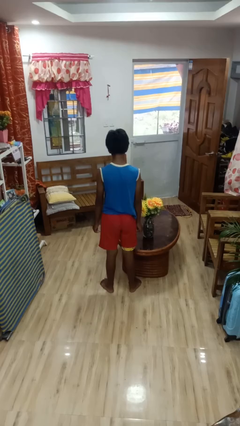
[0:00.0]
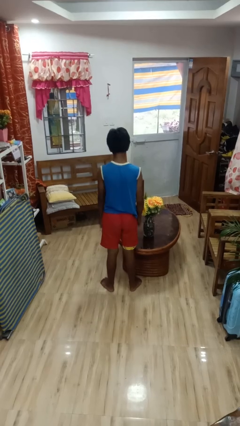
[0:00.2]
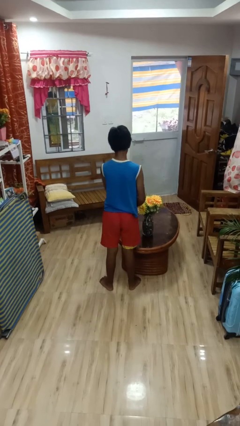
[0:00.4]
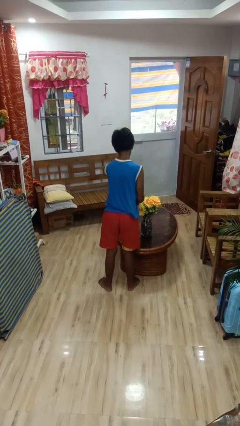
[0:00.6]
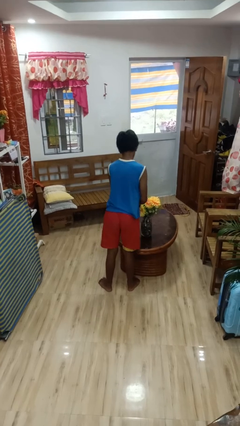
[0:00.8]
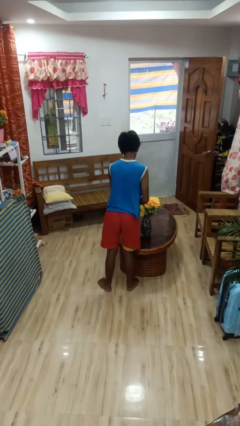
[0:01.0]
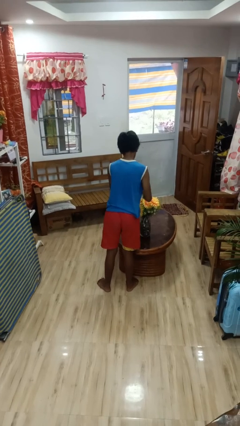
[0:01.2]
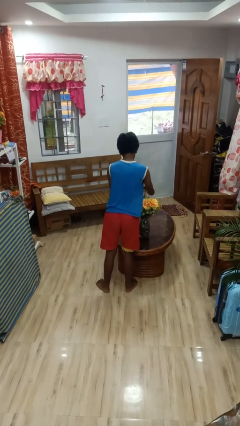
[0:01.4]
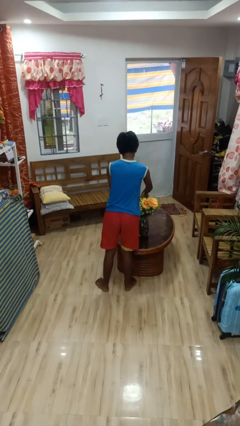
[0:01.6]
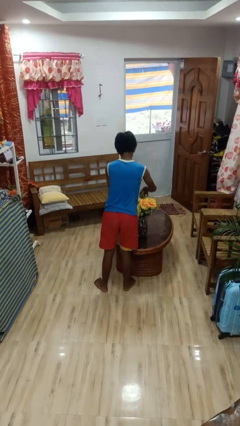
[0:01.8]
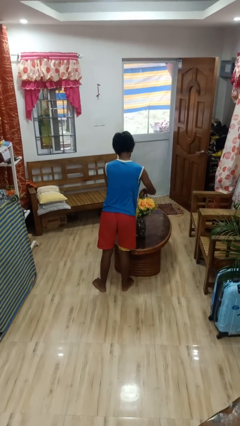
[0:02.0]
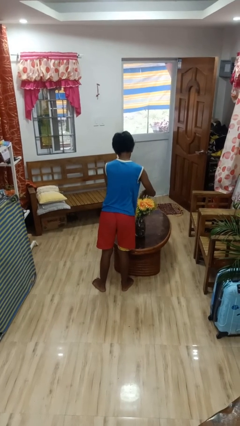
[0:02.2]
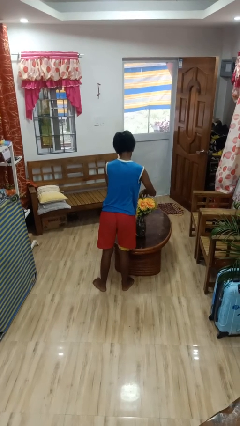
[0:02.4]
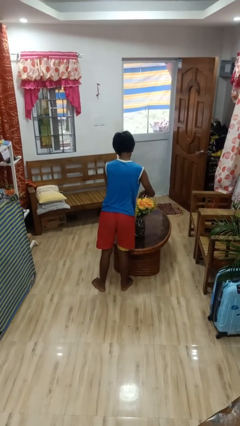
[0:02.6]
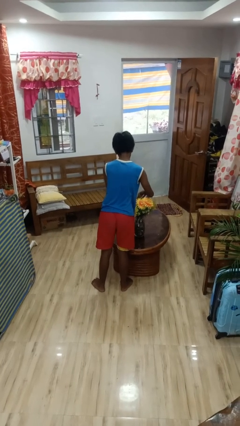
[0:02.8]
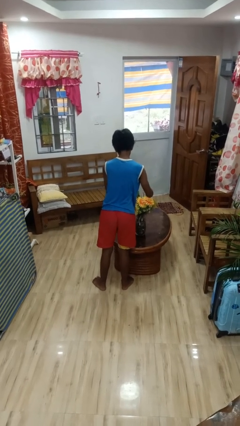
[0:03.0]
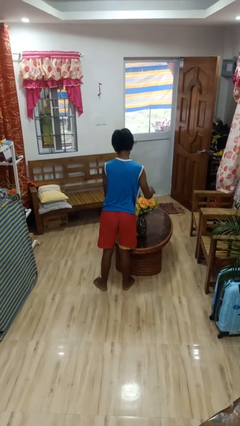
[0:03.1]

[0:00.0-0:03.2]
person arranges flowers in vase

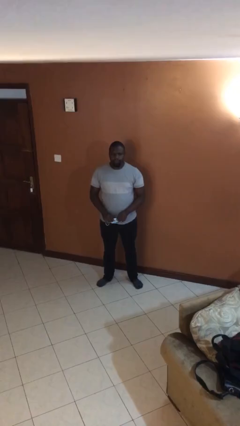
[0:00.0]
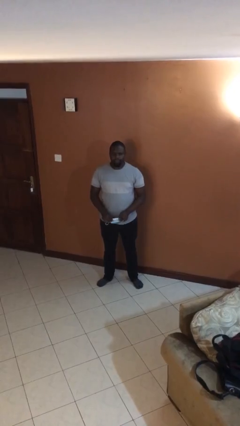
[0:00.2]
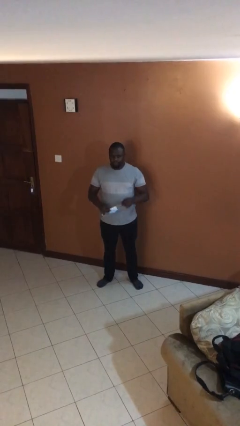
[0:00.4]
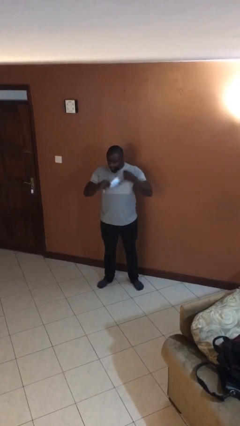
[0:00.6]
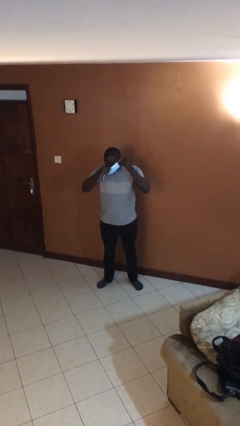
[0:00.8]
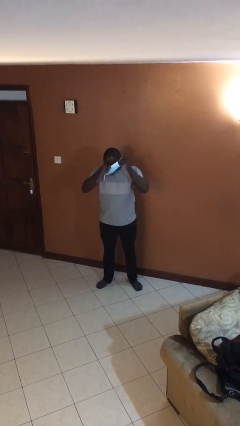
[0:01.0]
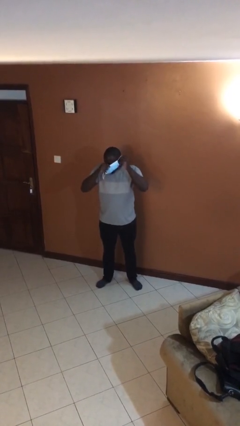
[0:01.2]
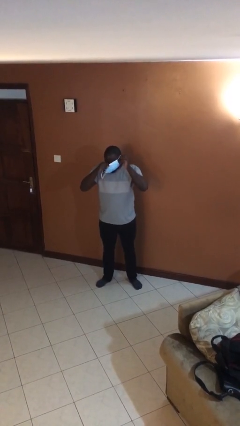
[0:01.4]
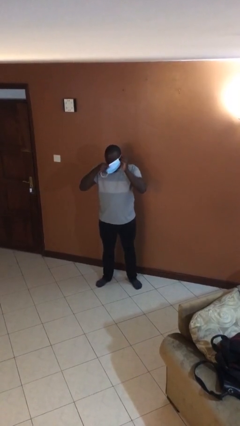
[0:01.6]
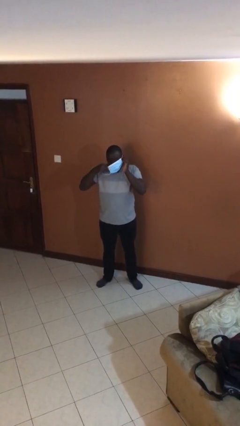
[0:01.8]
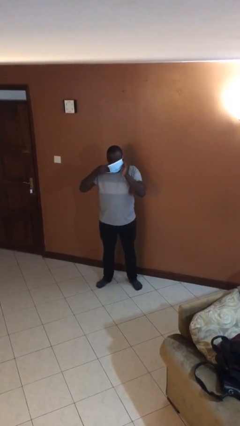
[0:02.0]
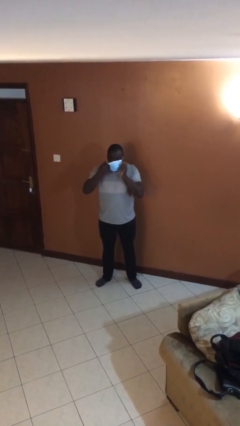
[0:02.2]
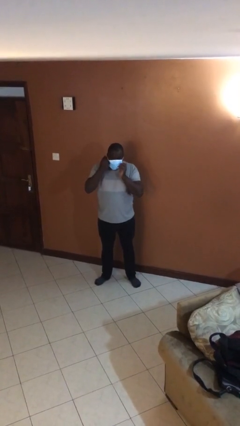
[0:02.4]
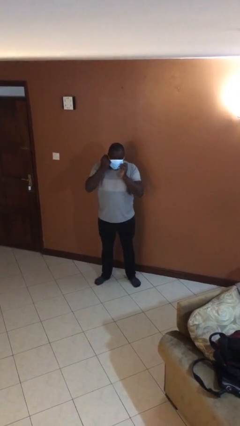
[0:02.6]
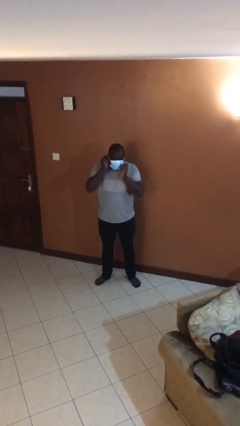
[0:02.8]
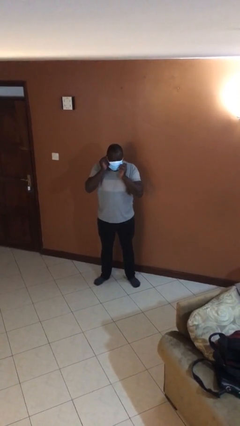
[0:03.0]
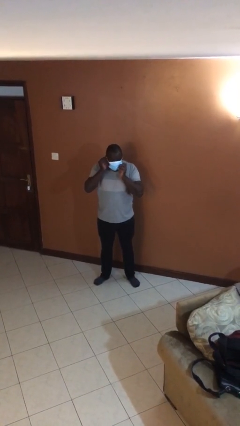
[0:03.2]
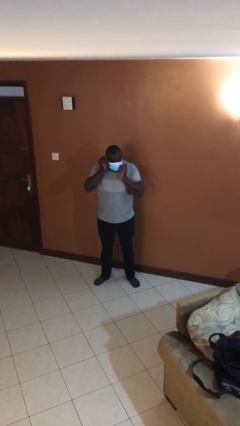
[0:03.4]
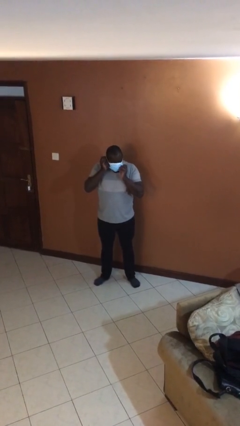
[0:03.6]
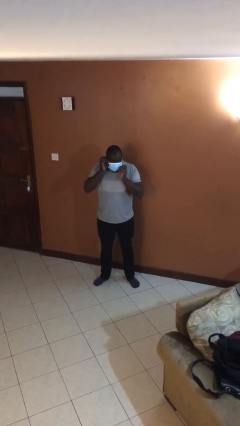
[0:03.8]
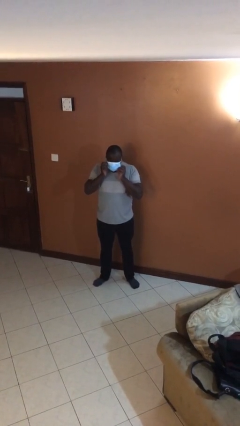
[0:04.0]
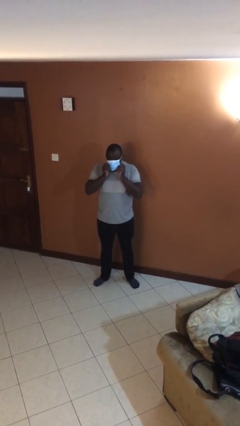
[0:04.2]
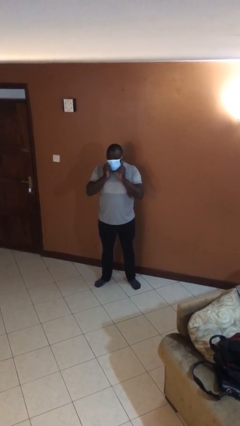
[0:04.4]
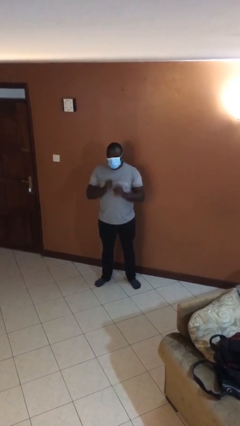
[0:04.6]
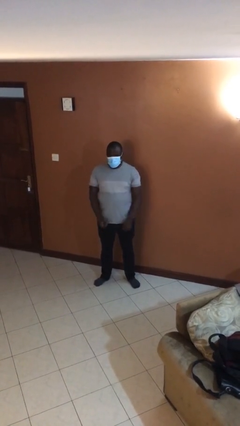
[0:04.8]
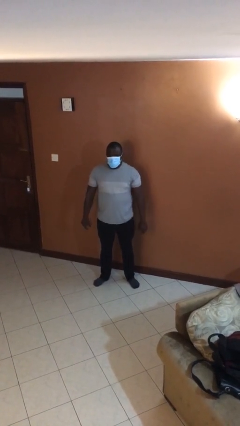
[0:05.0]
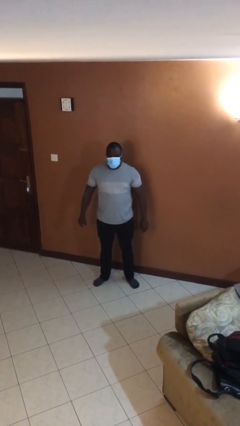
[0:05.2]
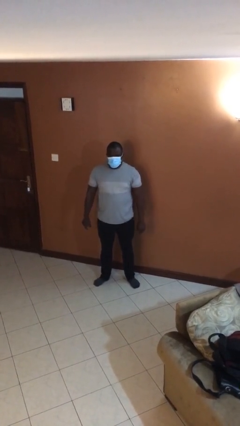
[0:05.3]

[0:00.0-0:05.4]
person puts on facemask

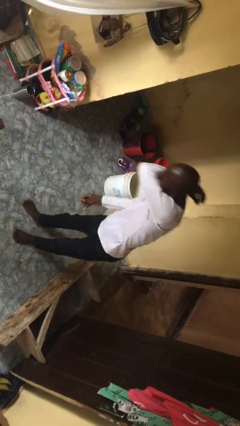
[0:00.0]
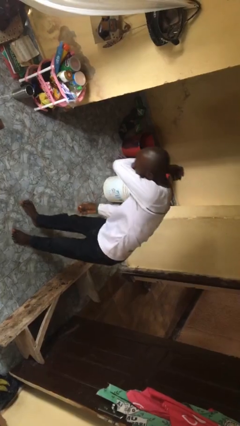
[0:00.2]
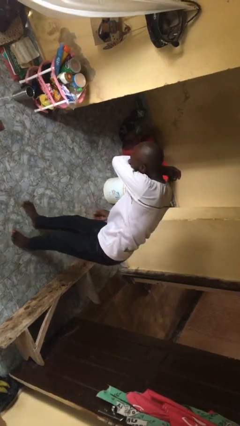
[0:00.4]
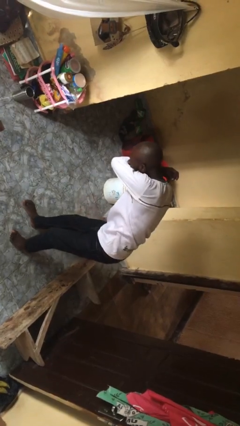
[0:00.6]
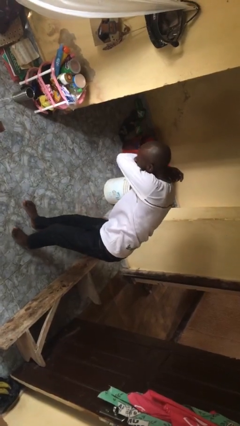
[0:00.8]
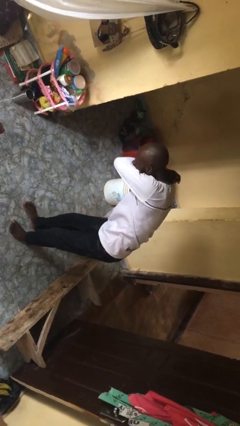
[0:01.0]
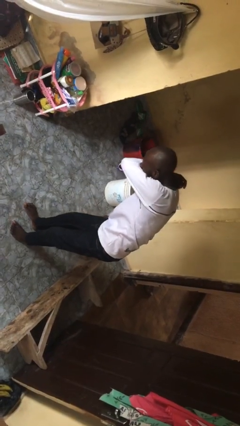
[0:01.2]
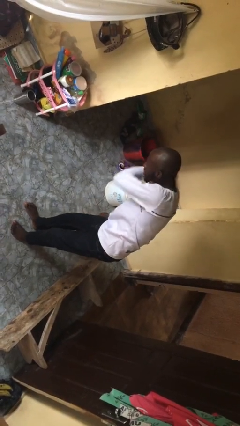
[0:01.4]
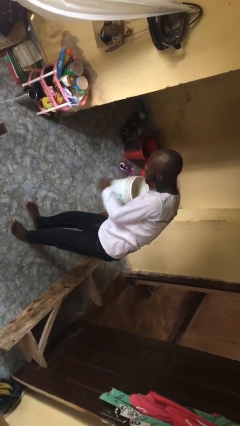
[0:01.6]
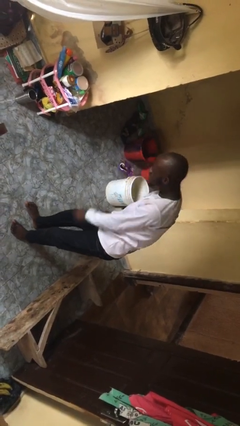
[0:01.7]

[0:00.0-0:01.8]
person sneezes into arm

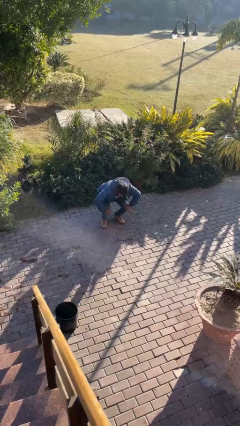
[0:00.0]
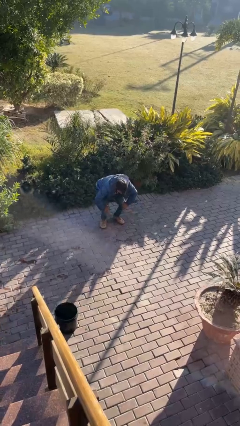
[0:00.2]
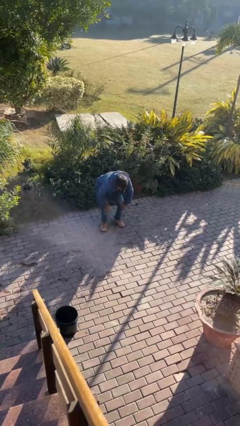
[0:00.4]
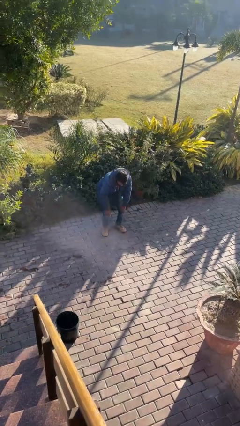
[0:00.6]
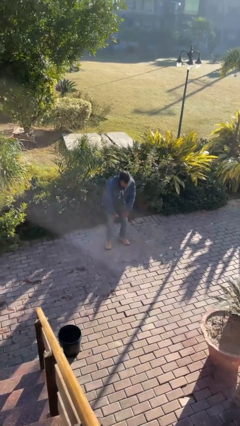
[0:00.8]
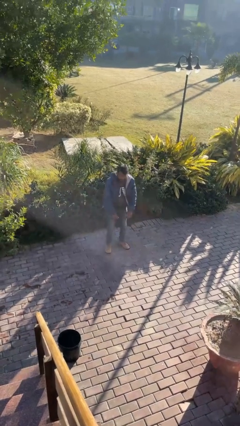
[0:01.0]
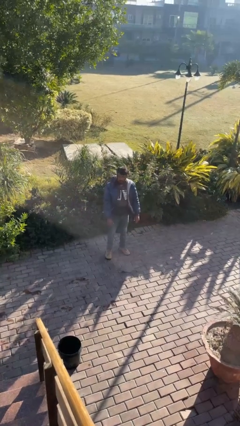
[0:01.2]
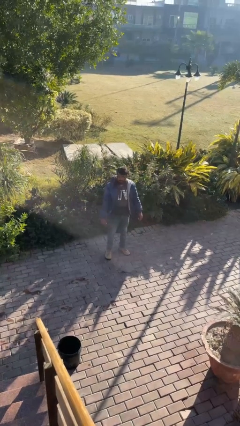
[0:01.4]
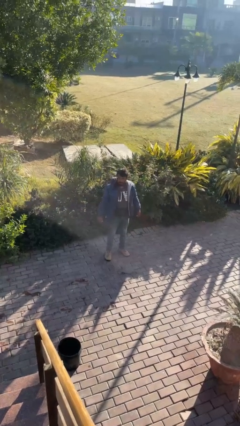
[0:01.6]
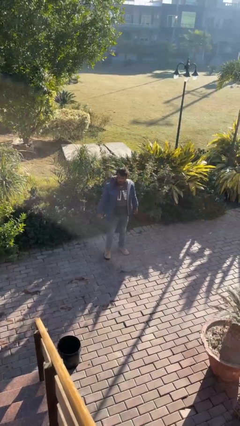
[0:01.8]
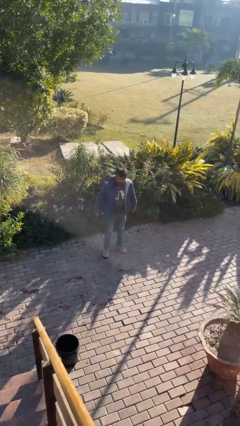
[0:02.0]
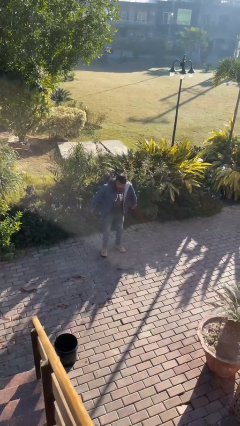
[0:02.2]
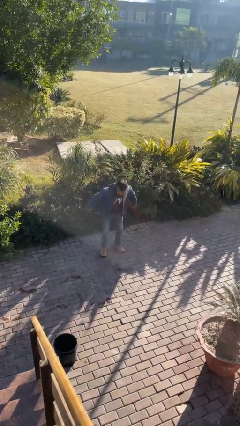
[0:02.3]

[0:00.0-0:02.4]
person stands up

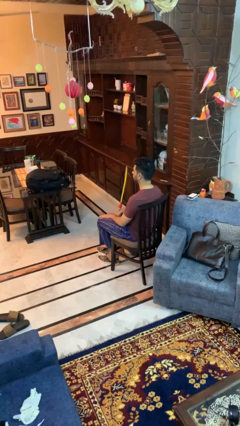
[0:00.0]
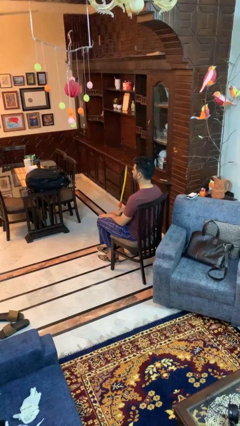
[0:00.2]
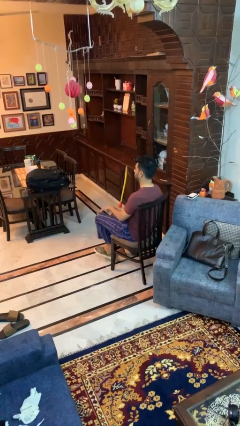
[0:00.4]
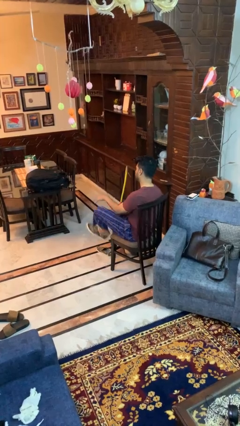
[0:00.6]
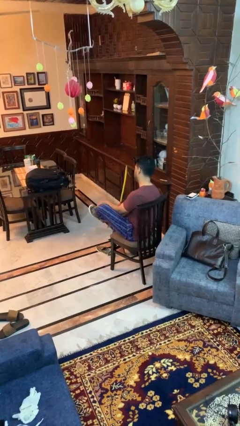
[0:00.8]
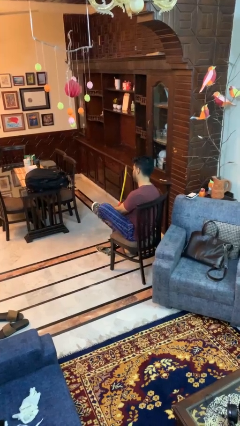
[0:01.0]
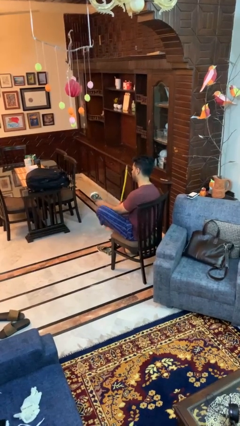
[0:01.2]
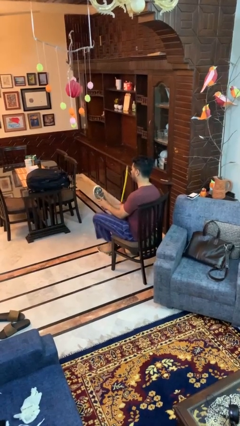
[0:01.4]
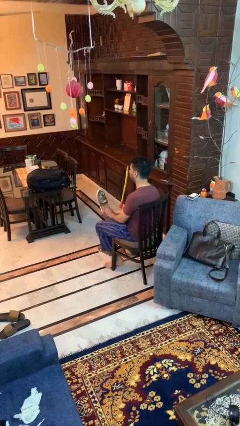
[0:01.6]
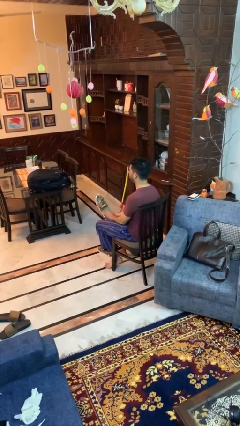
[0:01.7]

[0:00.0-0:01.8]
person takes off shoes

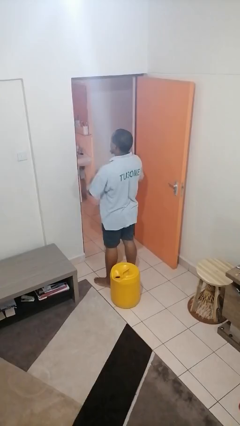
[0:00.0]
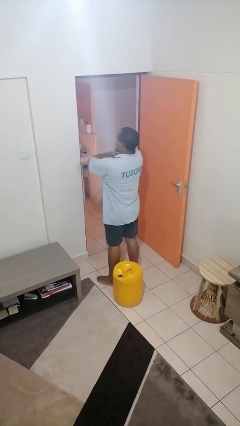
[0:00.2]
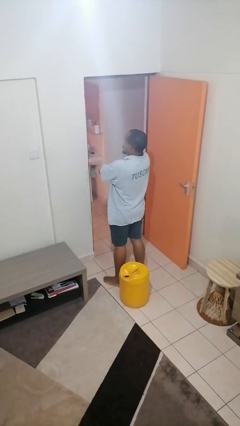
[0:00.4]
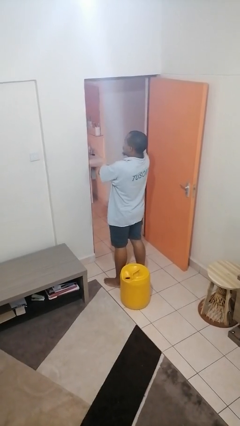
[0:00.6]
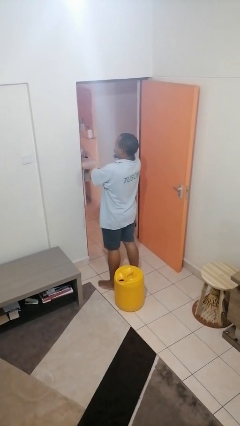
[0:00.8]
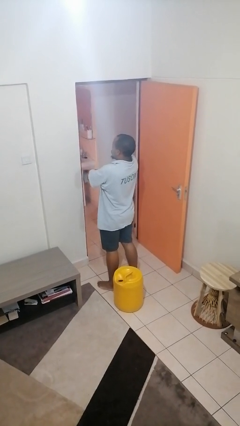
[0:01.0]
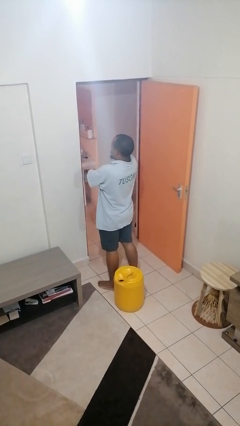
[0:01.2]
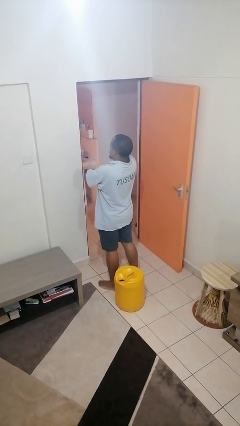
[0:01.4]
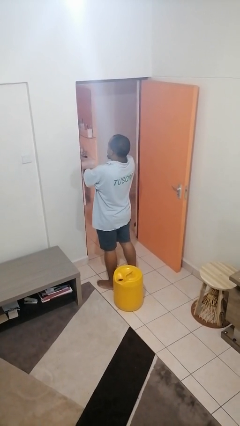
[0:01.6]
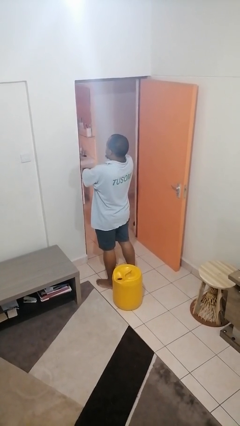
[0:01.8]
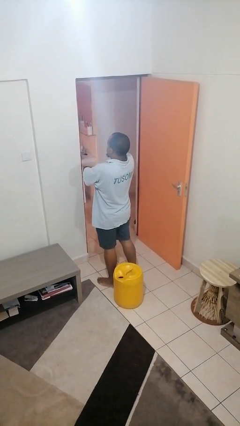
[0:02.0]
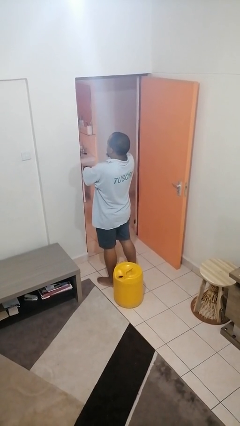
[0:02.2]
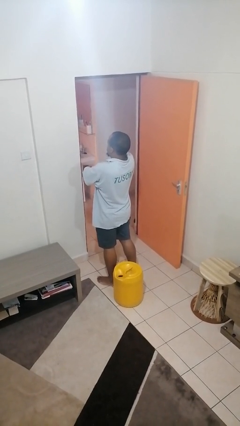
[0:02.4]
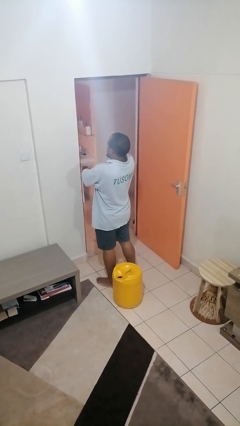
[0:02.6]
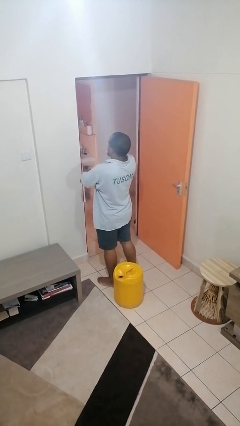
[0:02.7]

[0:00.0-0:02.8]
person crosses arms
